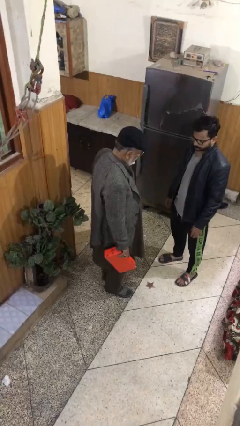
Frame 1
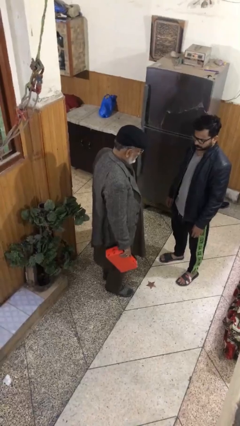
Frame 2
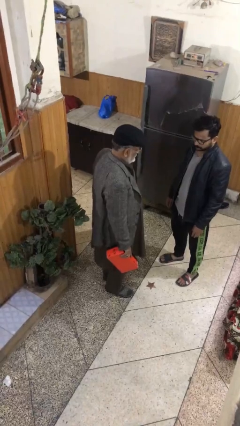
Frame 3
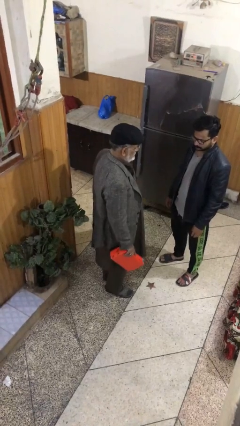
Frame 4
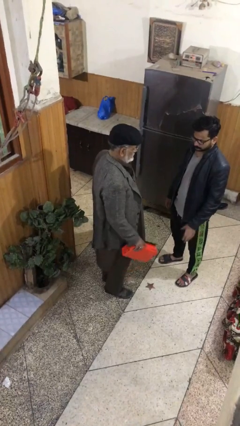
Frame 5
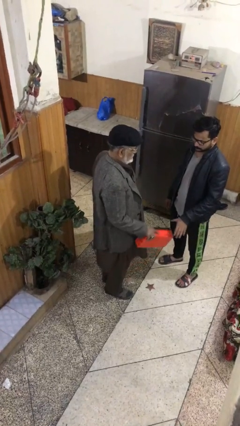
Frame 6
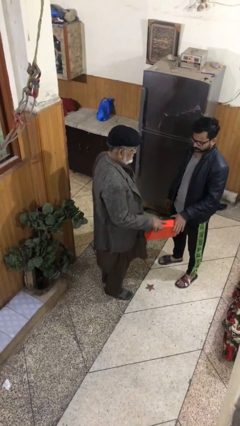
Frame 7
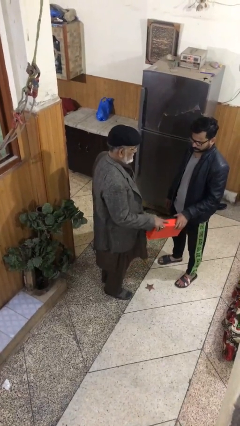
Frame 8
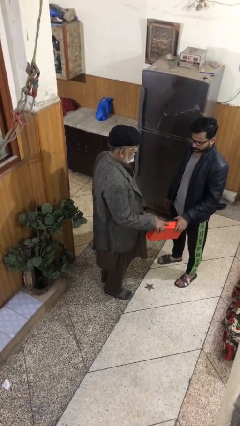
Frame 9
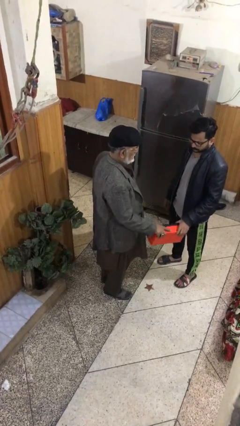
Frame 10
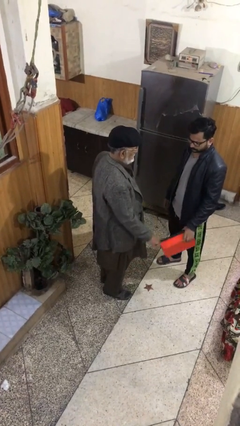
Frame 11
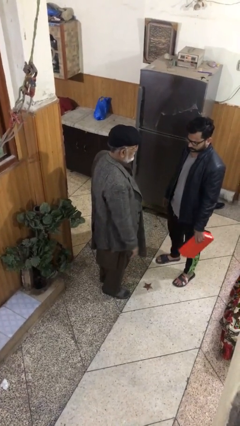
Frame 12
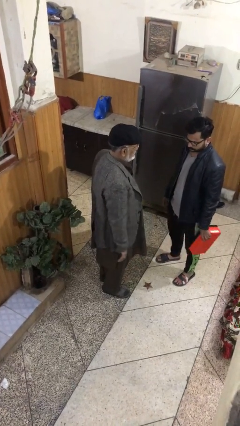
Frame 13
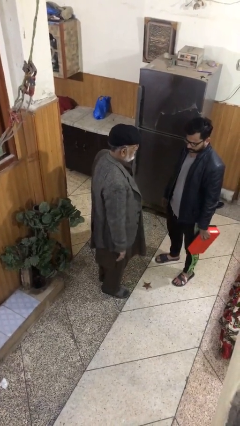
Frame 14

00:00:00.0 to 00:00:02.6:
person transfers object to person

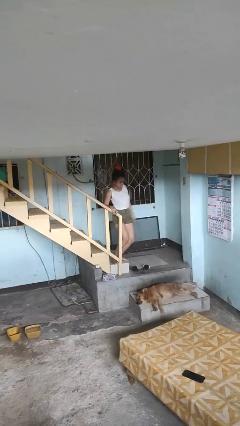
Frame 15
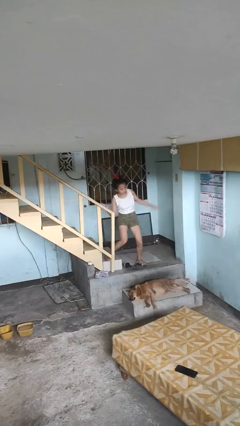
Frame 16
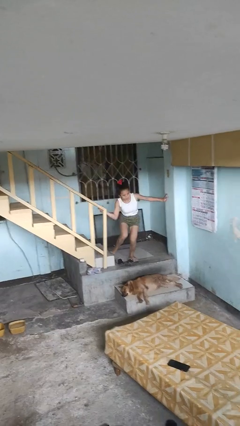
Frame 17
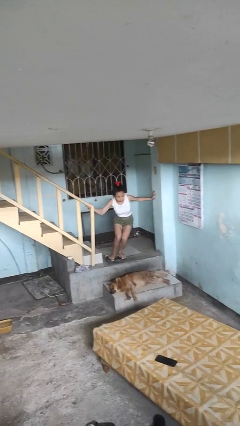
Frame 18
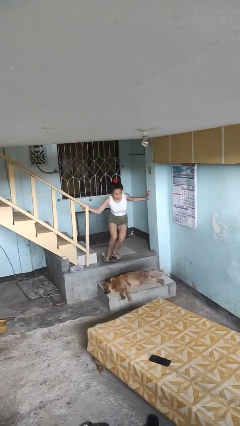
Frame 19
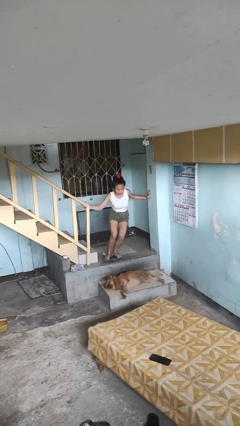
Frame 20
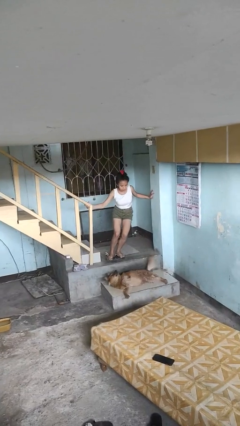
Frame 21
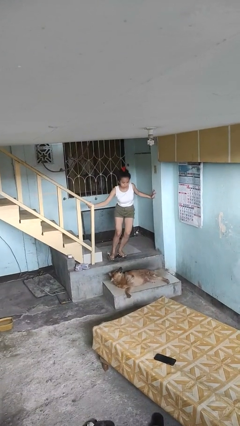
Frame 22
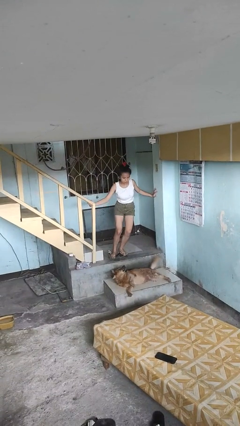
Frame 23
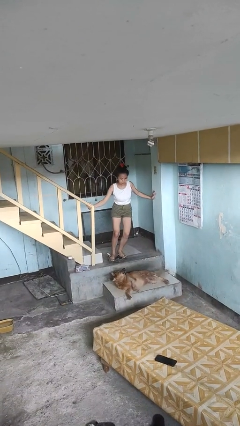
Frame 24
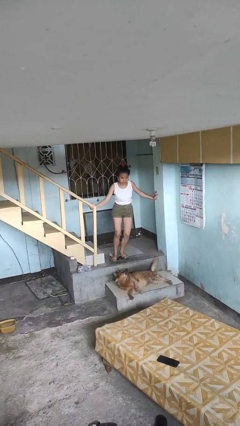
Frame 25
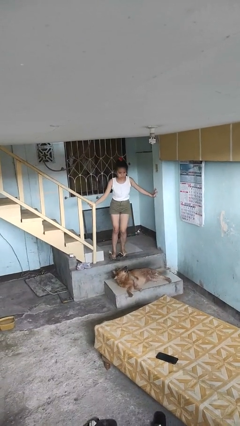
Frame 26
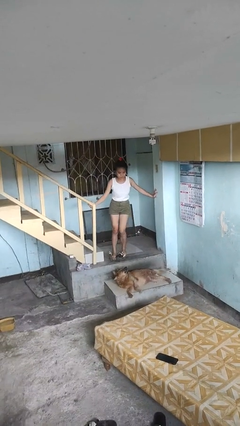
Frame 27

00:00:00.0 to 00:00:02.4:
person trips on stair

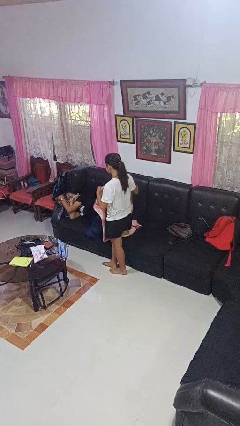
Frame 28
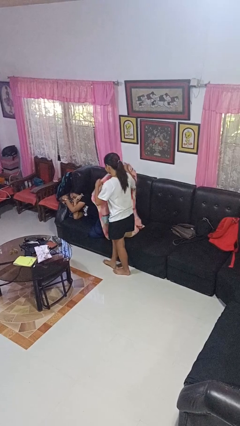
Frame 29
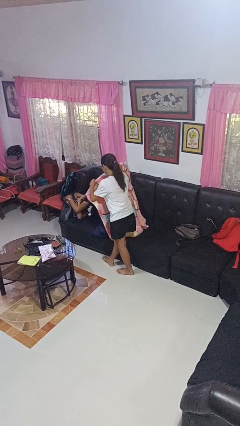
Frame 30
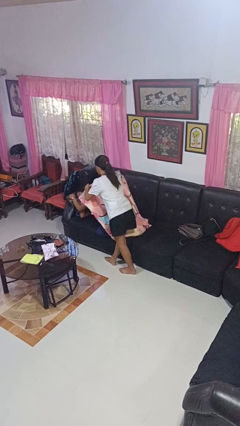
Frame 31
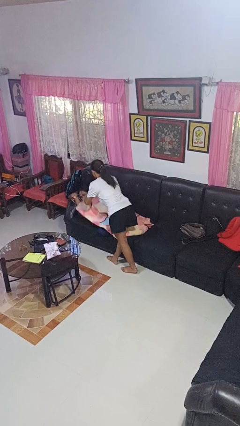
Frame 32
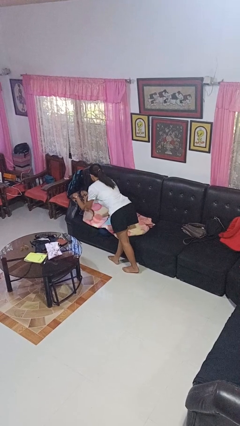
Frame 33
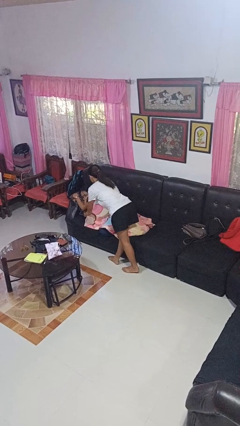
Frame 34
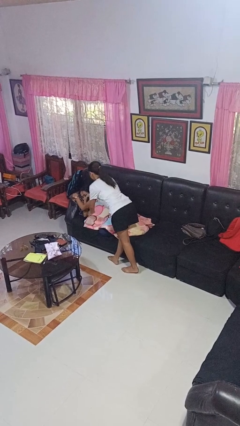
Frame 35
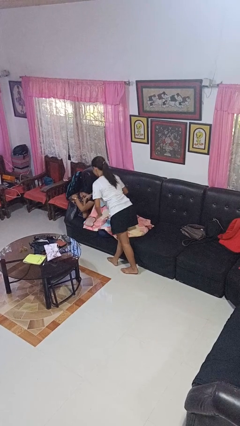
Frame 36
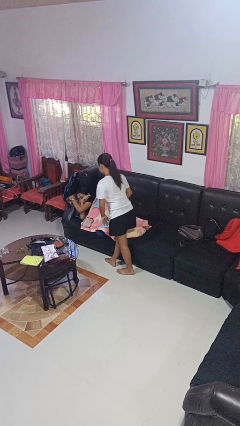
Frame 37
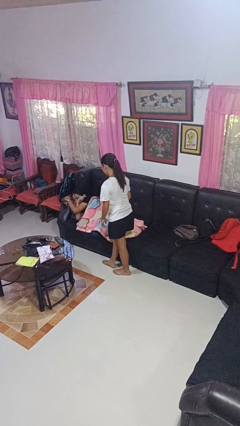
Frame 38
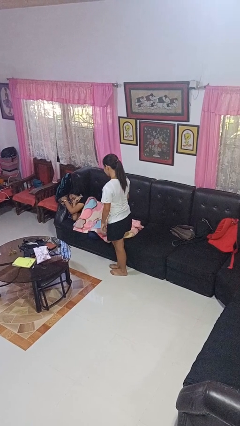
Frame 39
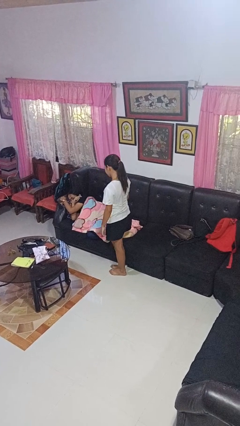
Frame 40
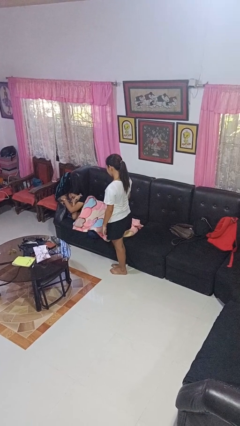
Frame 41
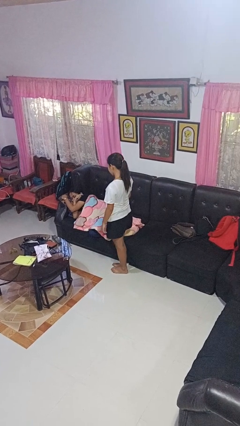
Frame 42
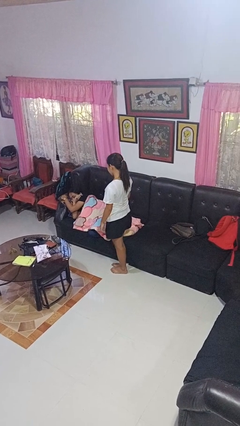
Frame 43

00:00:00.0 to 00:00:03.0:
person covers friend with blanket

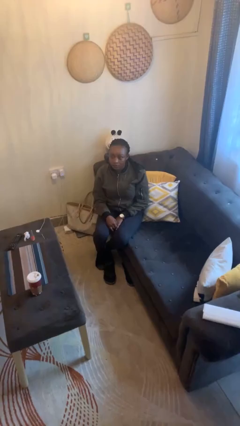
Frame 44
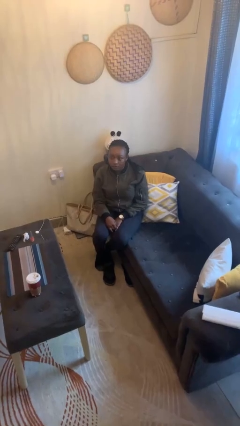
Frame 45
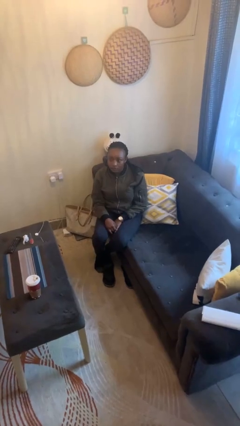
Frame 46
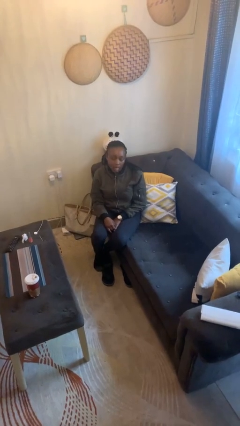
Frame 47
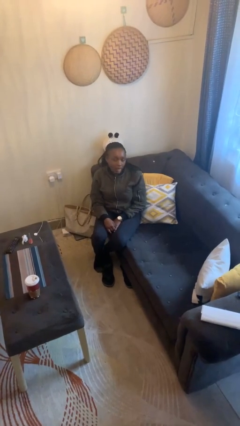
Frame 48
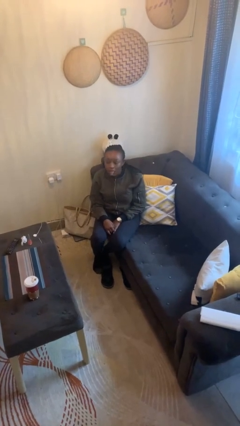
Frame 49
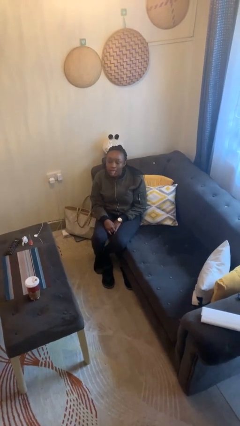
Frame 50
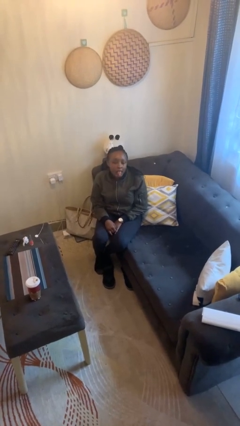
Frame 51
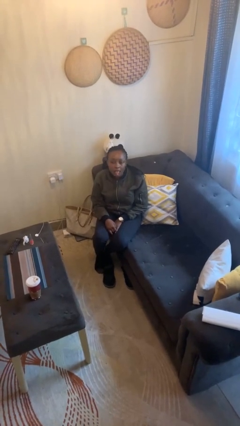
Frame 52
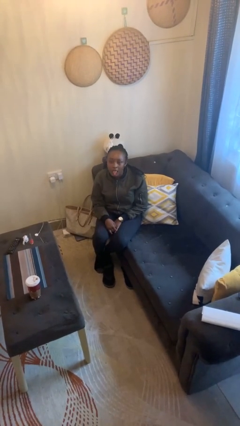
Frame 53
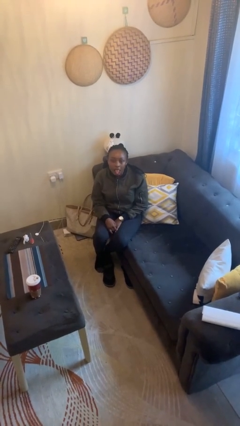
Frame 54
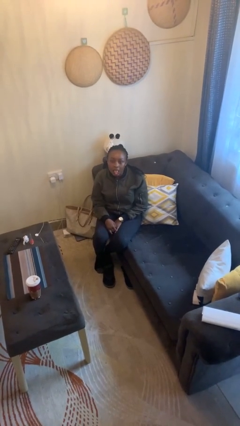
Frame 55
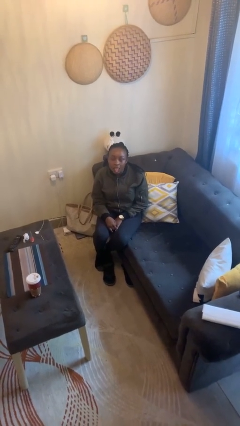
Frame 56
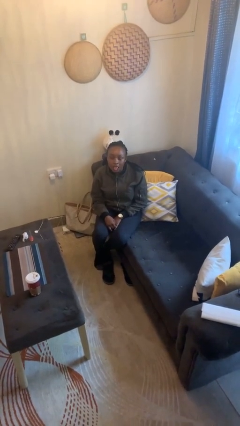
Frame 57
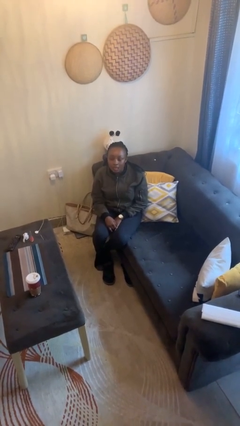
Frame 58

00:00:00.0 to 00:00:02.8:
person sticks out tongue

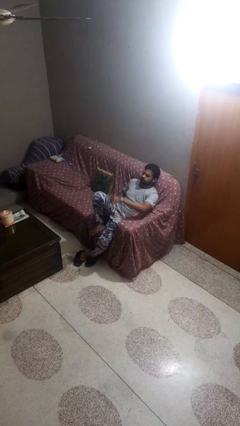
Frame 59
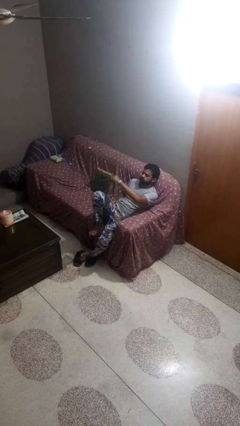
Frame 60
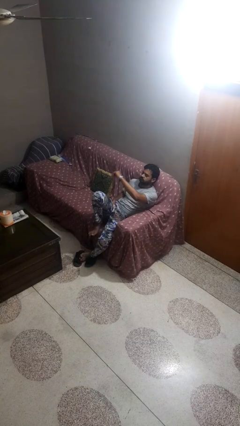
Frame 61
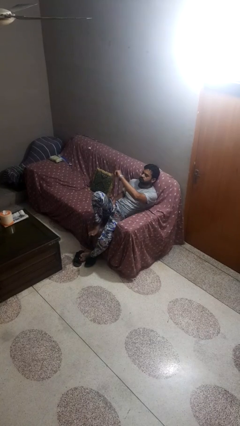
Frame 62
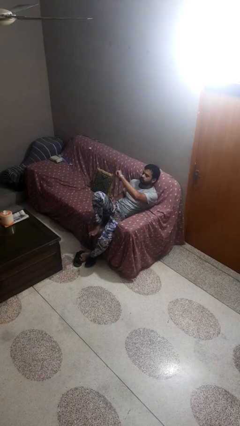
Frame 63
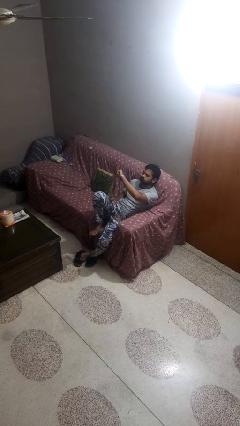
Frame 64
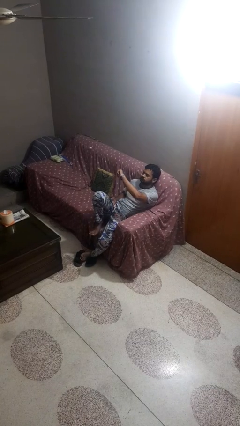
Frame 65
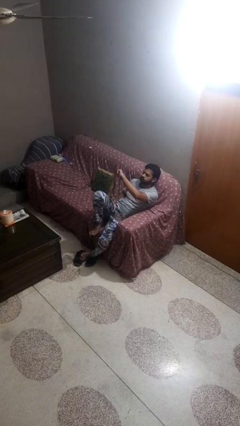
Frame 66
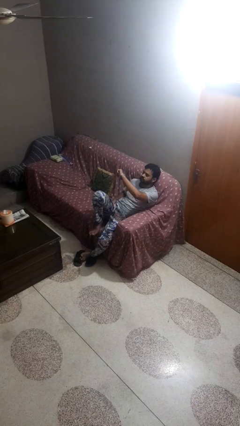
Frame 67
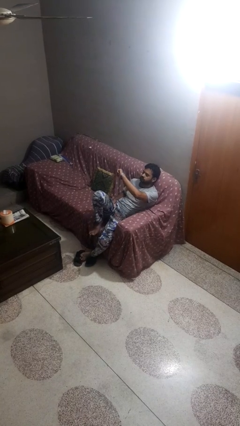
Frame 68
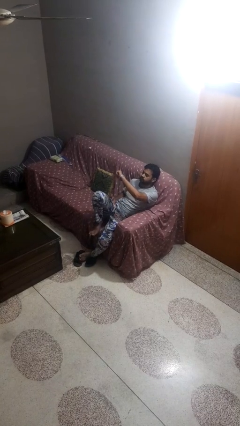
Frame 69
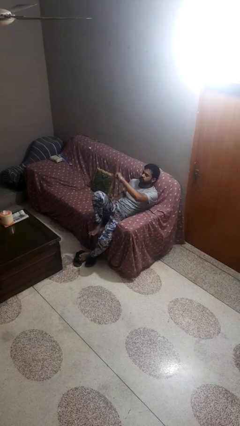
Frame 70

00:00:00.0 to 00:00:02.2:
person looks at wristwatch

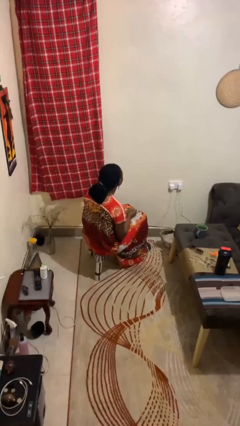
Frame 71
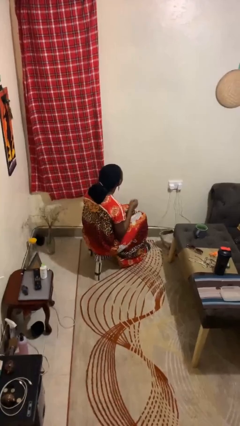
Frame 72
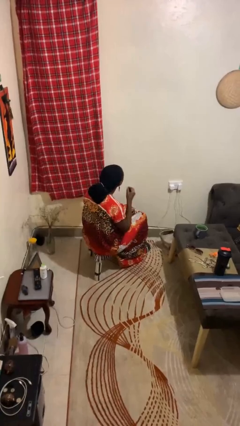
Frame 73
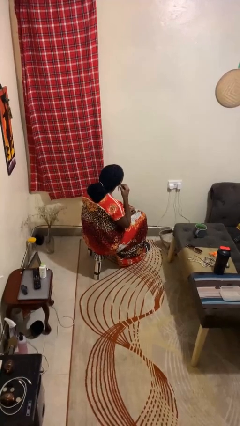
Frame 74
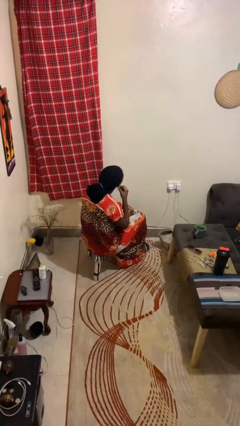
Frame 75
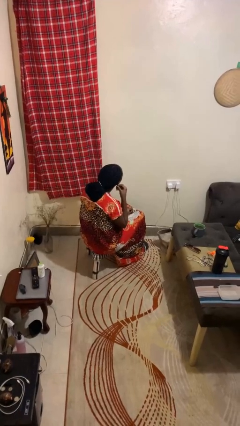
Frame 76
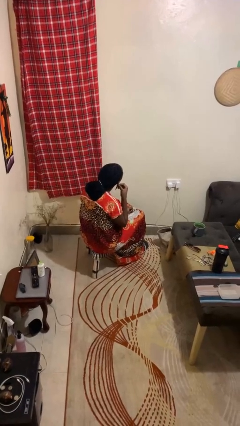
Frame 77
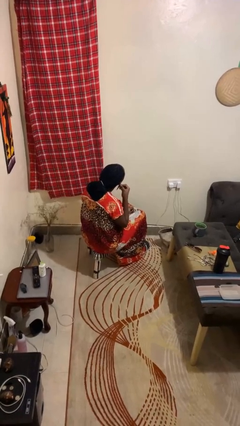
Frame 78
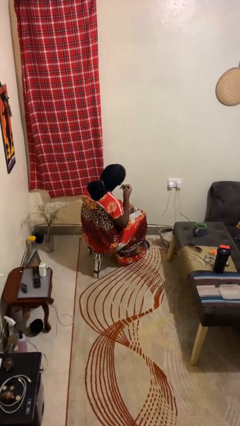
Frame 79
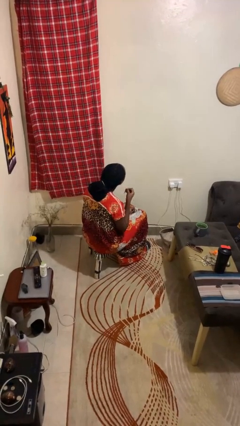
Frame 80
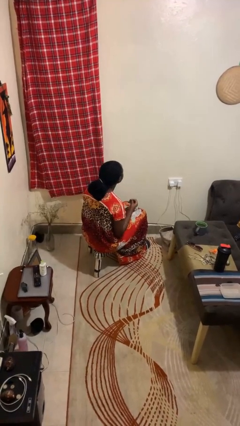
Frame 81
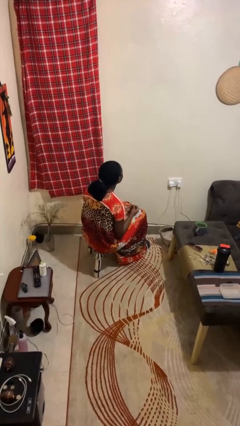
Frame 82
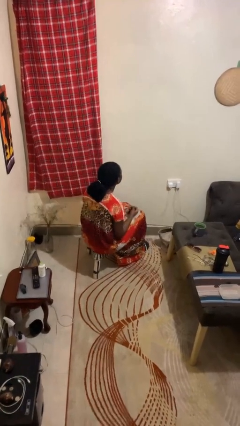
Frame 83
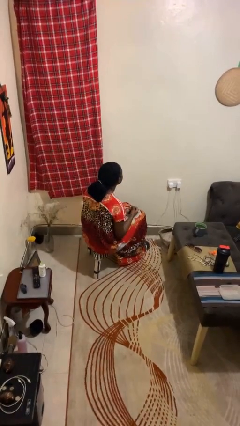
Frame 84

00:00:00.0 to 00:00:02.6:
person takes off earrings

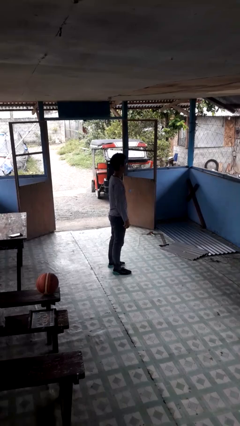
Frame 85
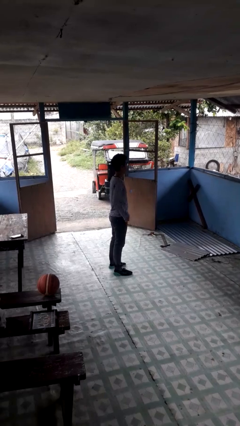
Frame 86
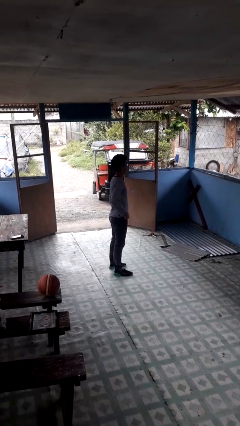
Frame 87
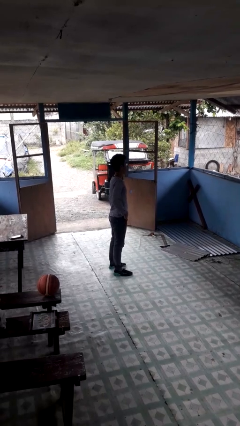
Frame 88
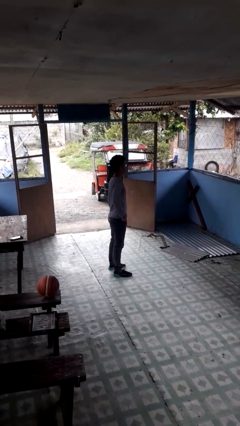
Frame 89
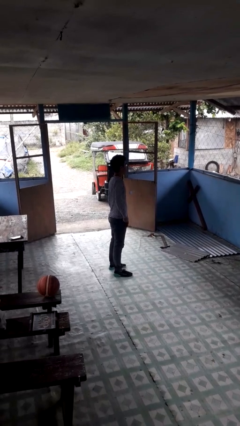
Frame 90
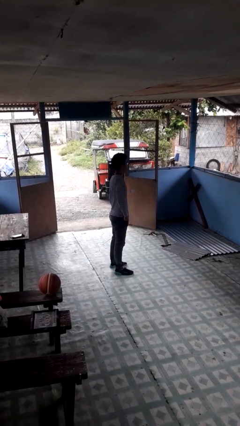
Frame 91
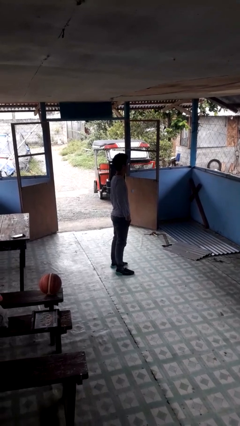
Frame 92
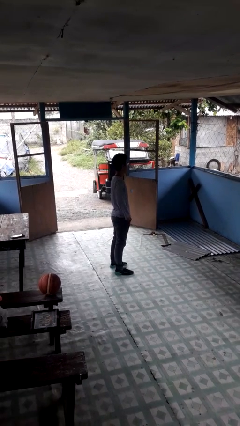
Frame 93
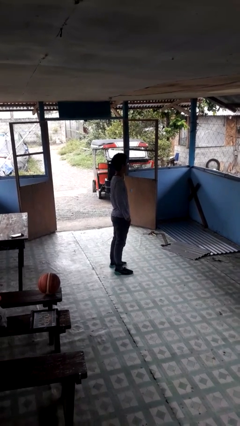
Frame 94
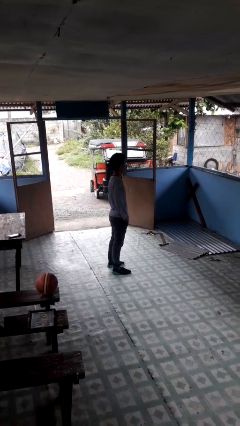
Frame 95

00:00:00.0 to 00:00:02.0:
person puts hands in back pockets
